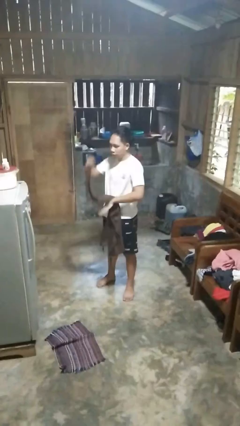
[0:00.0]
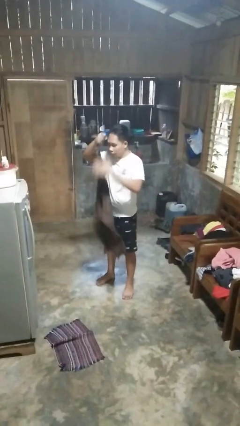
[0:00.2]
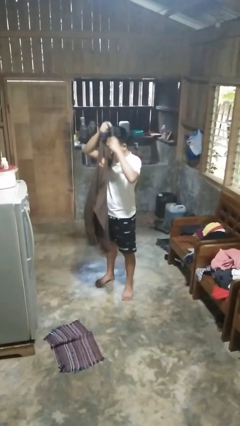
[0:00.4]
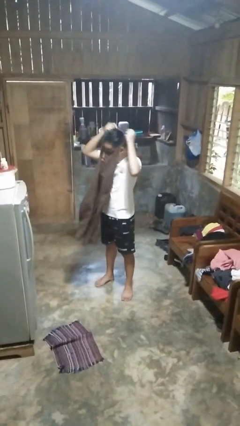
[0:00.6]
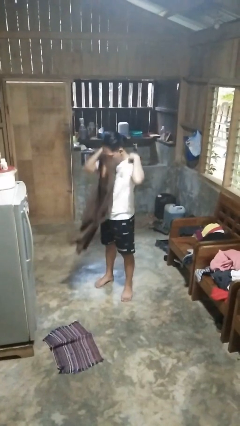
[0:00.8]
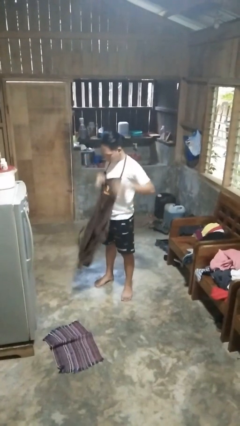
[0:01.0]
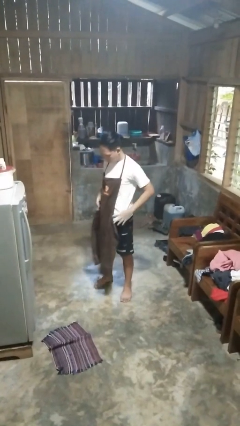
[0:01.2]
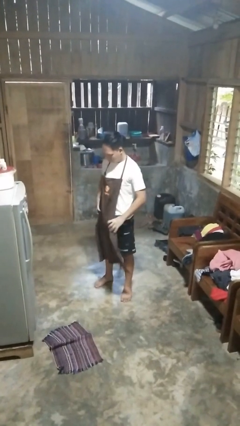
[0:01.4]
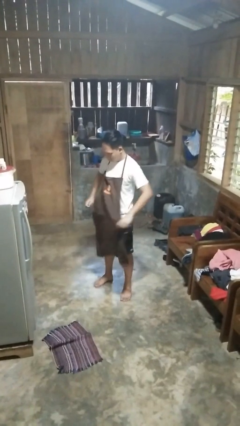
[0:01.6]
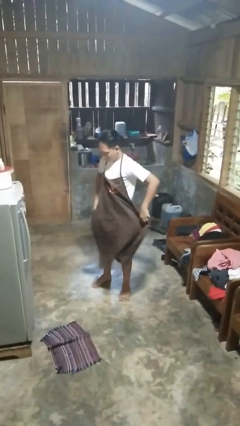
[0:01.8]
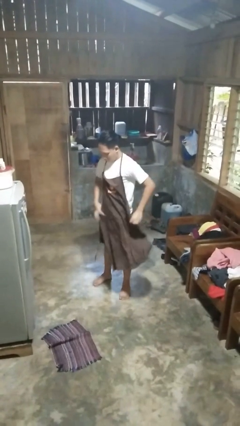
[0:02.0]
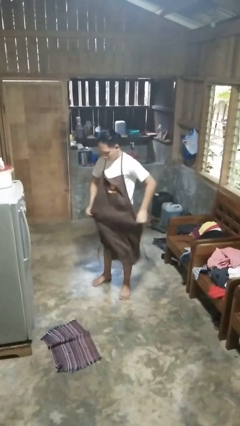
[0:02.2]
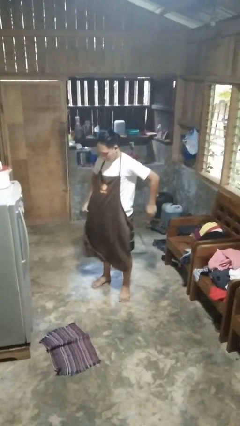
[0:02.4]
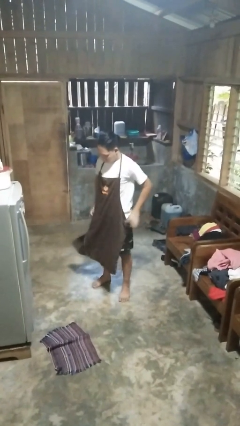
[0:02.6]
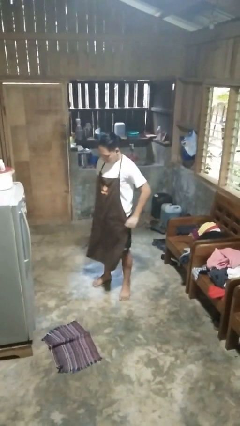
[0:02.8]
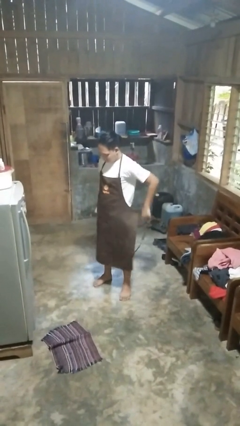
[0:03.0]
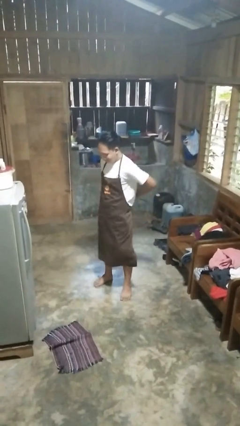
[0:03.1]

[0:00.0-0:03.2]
person puts on apron

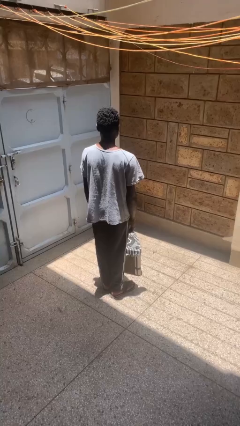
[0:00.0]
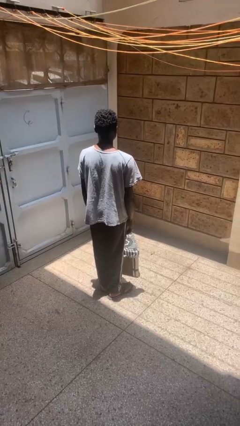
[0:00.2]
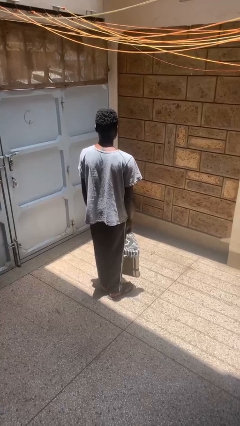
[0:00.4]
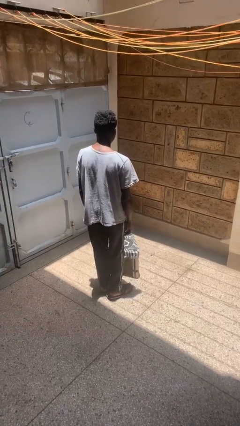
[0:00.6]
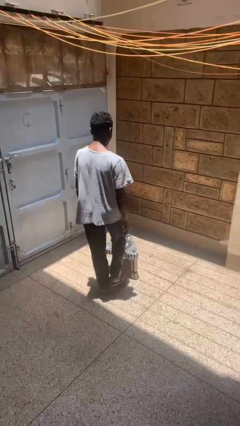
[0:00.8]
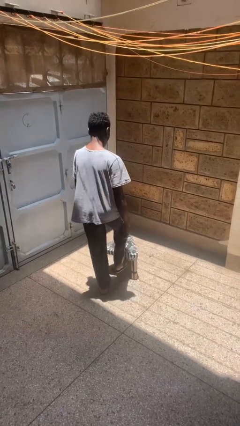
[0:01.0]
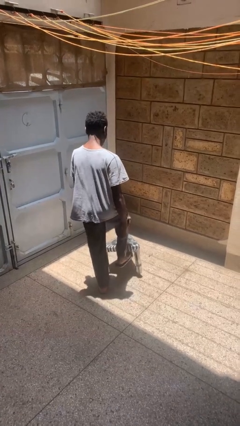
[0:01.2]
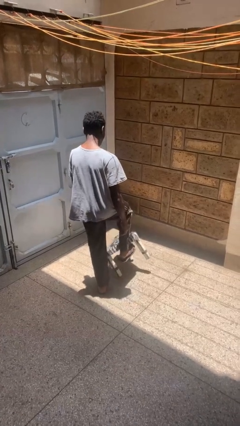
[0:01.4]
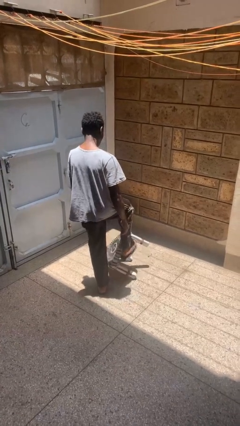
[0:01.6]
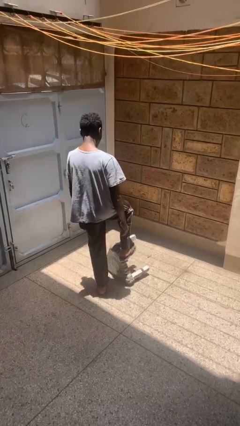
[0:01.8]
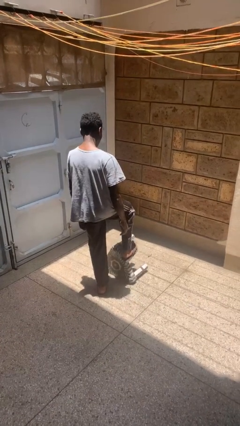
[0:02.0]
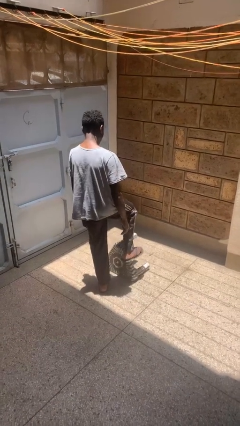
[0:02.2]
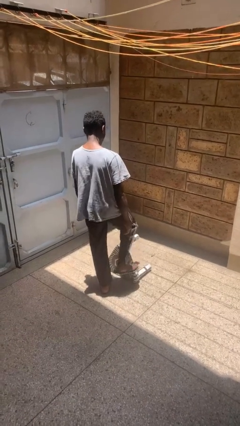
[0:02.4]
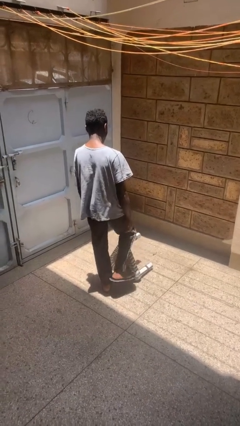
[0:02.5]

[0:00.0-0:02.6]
person knocks over furniture

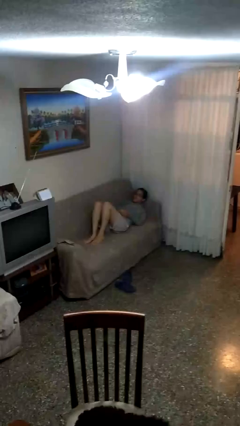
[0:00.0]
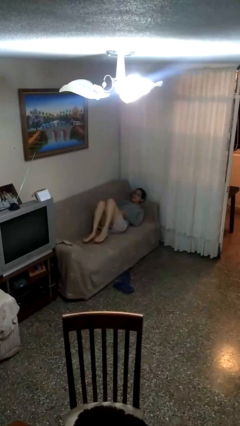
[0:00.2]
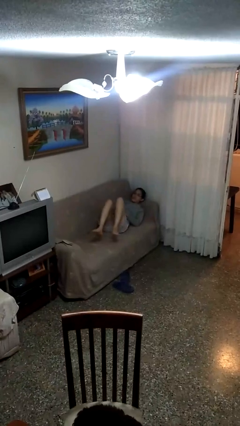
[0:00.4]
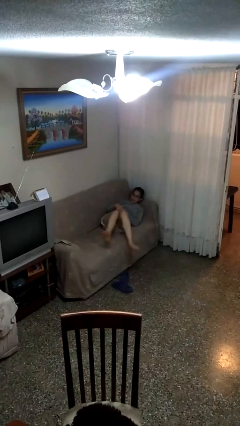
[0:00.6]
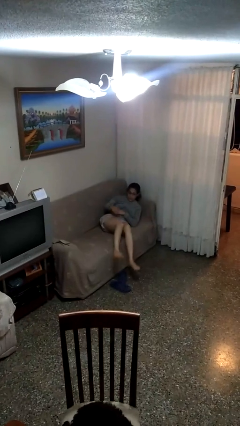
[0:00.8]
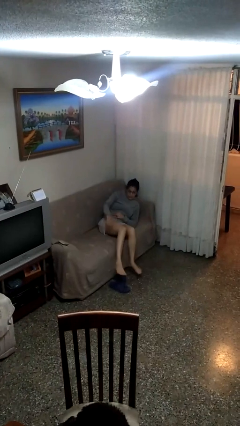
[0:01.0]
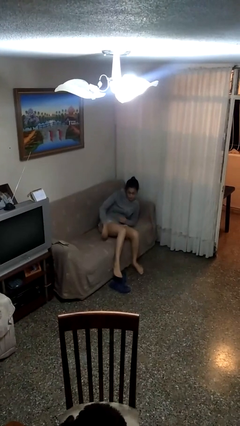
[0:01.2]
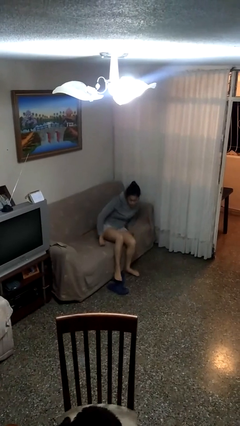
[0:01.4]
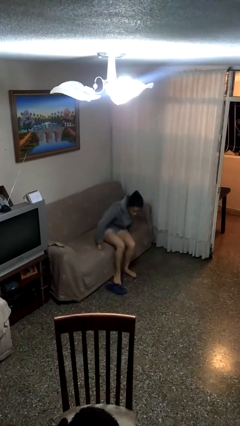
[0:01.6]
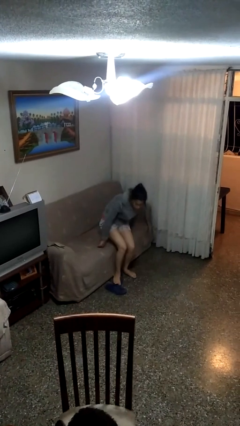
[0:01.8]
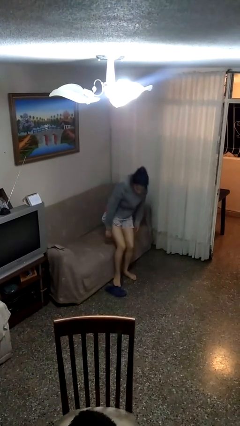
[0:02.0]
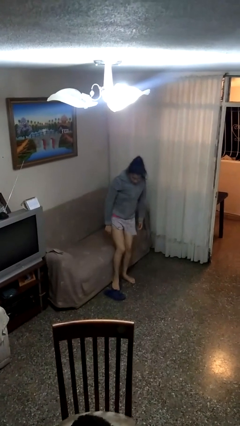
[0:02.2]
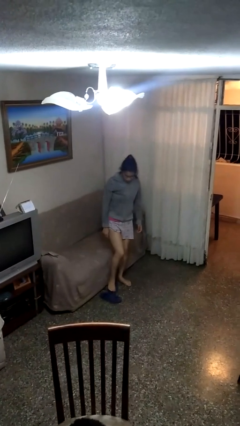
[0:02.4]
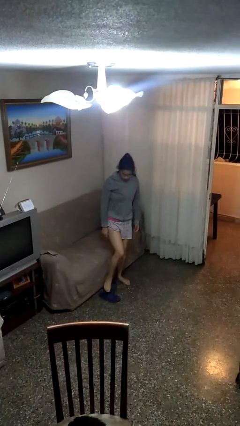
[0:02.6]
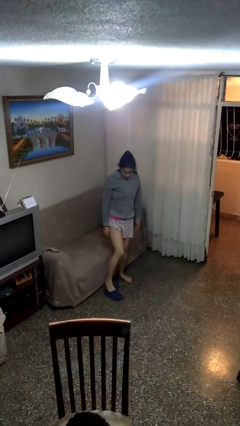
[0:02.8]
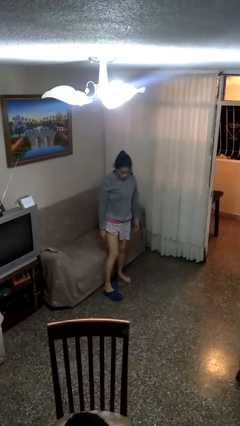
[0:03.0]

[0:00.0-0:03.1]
person stands up

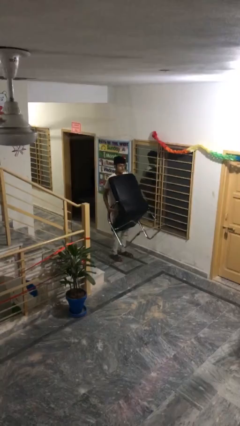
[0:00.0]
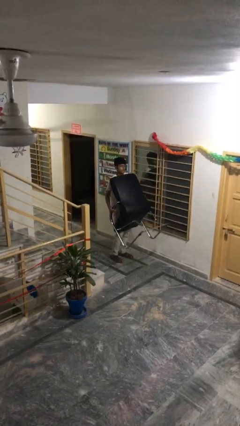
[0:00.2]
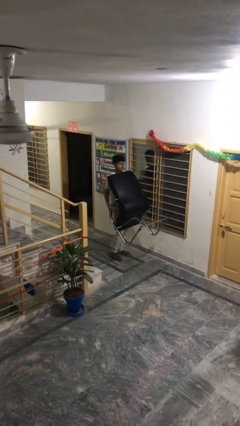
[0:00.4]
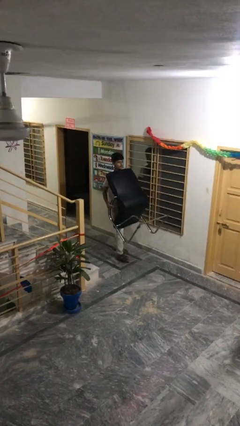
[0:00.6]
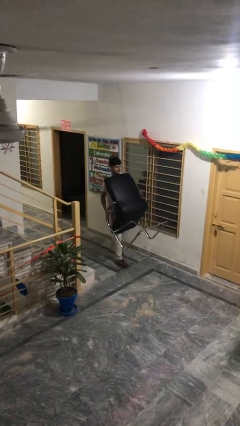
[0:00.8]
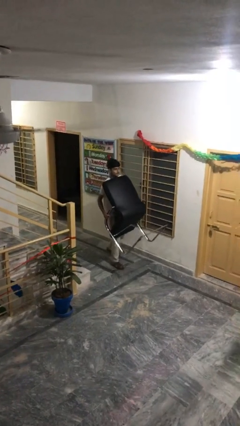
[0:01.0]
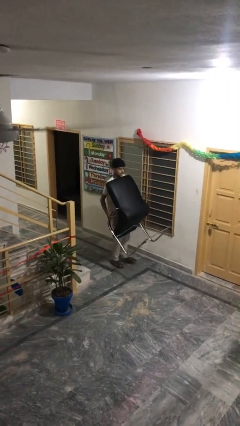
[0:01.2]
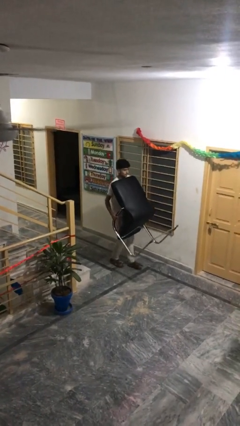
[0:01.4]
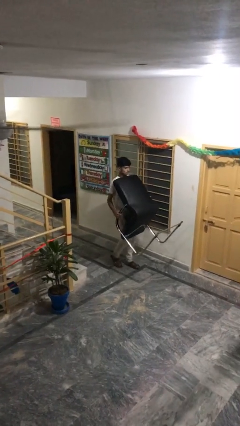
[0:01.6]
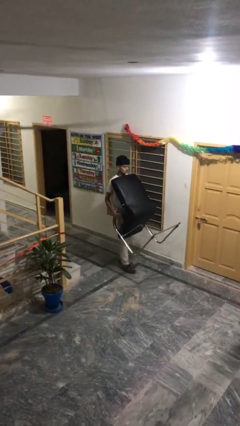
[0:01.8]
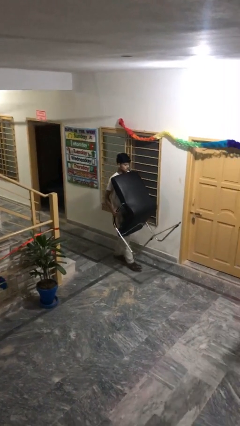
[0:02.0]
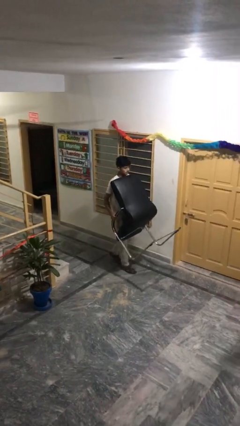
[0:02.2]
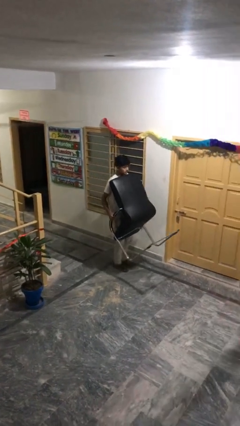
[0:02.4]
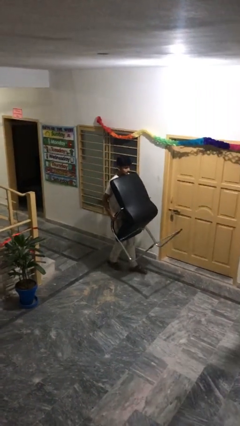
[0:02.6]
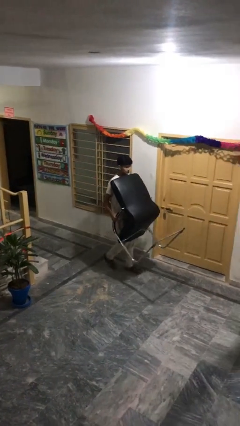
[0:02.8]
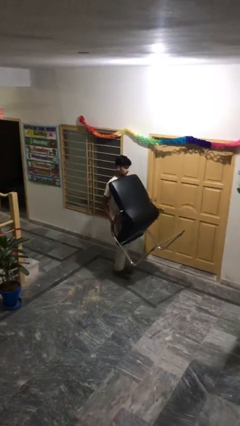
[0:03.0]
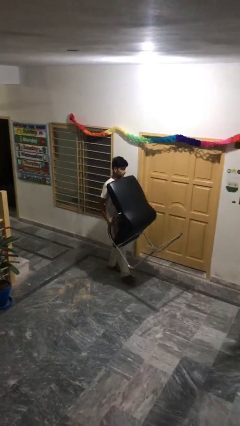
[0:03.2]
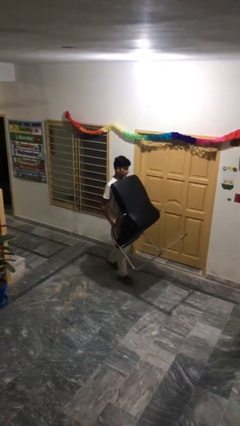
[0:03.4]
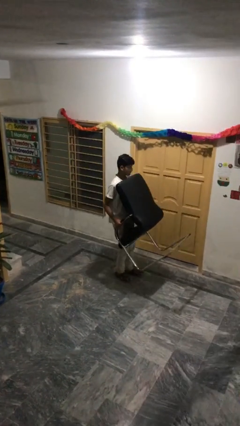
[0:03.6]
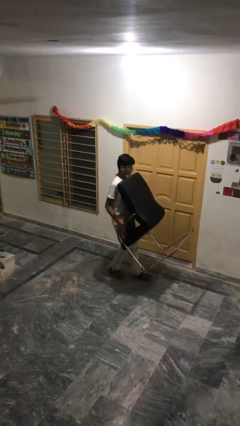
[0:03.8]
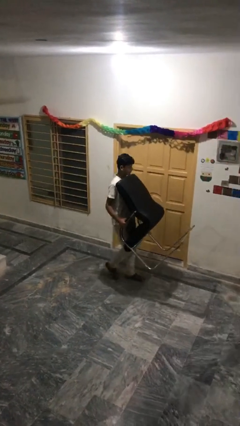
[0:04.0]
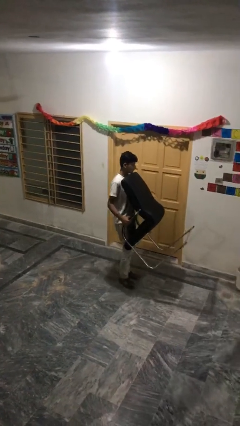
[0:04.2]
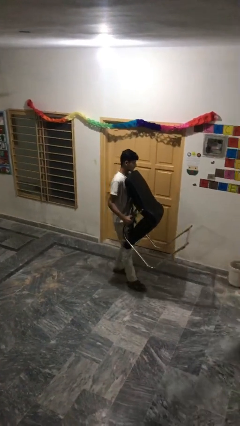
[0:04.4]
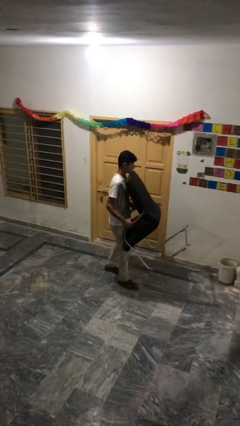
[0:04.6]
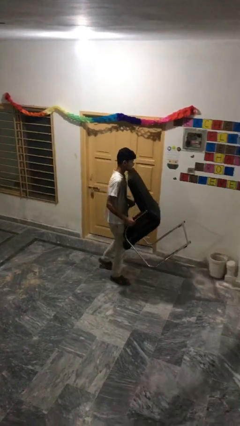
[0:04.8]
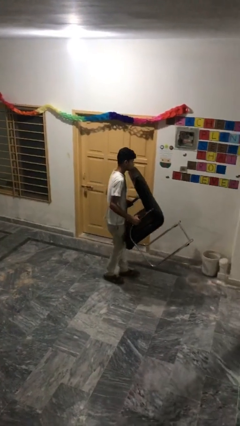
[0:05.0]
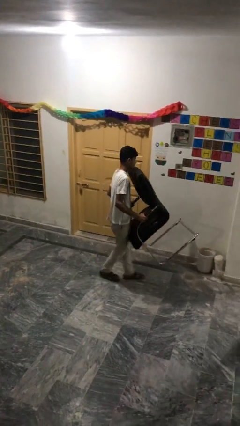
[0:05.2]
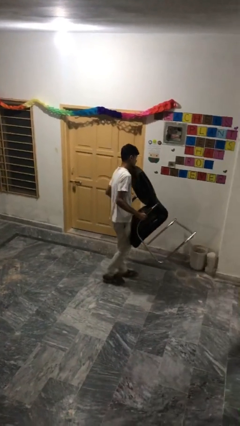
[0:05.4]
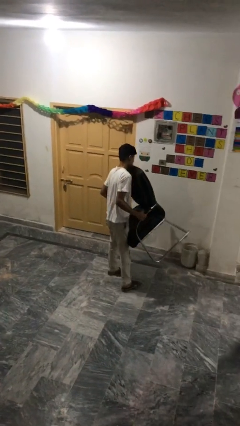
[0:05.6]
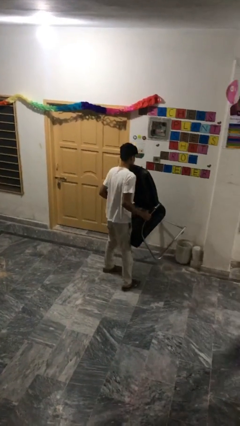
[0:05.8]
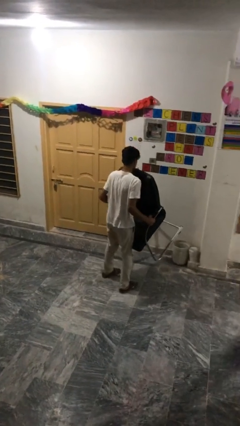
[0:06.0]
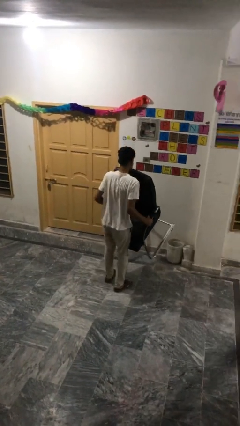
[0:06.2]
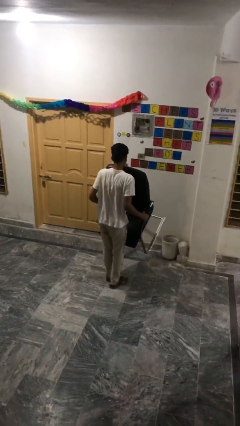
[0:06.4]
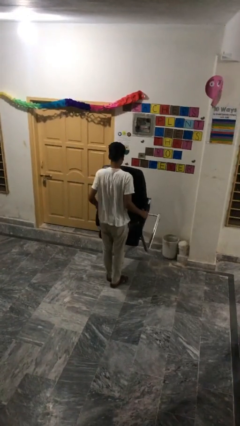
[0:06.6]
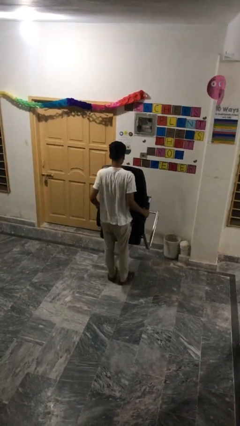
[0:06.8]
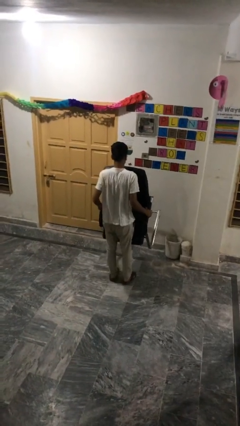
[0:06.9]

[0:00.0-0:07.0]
person carries heavy object

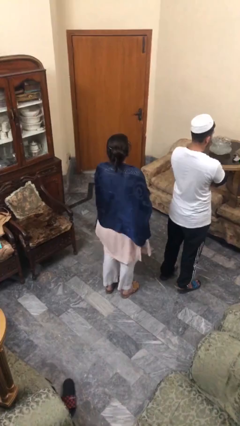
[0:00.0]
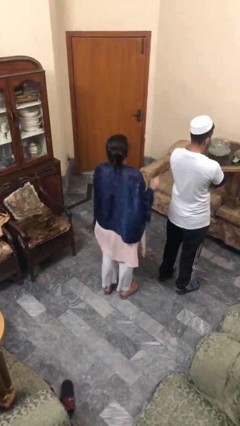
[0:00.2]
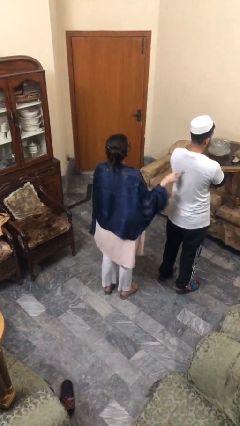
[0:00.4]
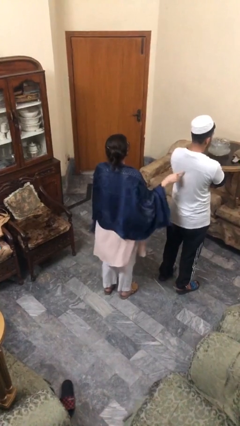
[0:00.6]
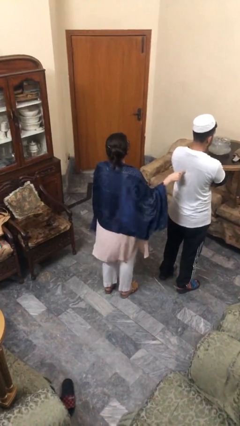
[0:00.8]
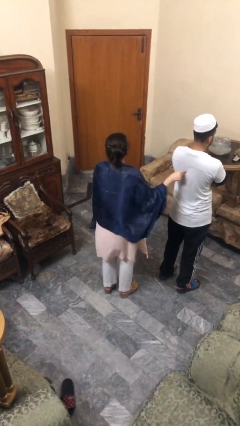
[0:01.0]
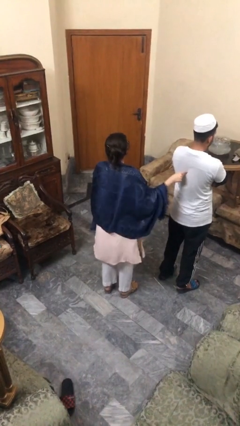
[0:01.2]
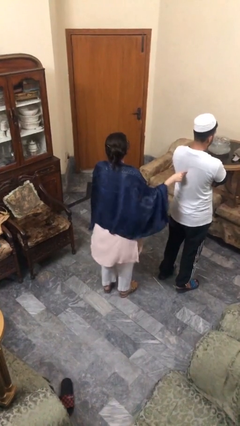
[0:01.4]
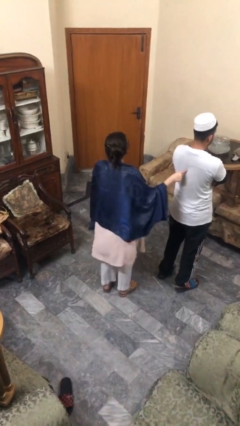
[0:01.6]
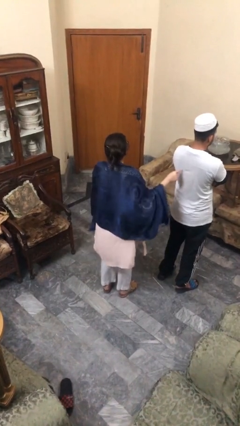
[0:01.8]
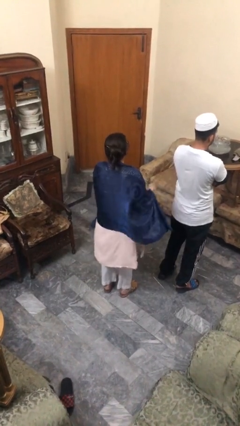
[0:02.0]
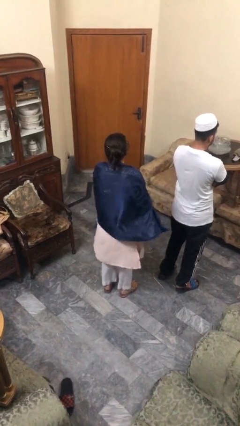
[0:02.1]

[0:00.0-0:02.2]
person touches back of person
